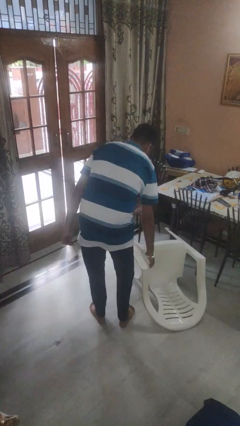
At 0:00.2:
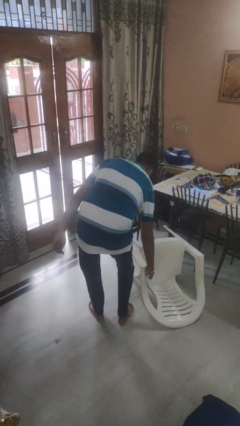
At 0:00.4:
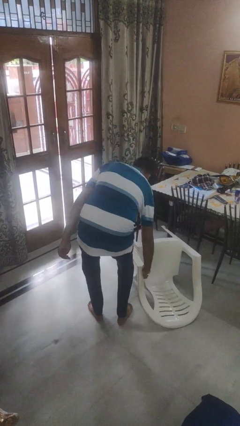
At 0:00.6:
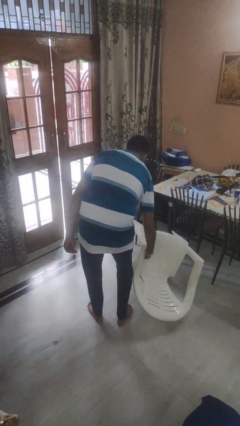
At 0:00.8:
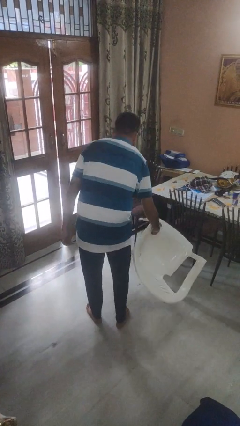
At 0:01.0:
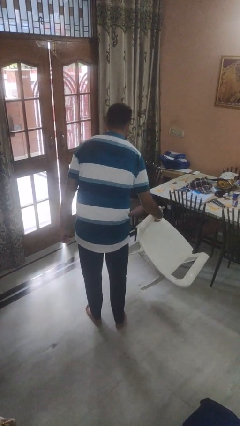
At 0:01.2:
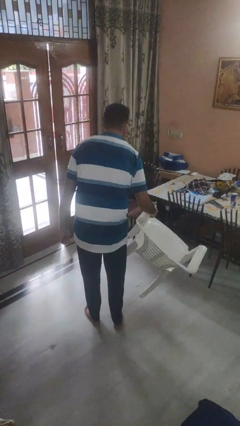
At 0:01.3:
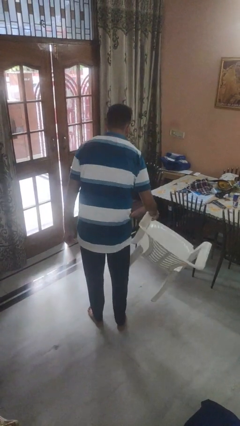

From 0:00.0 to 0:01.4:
person sets upright furniture

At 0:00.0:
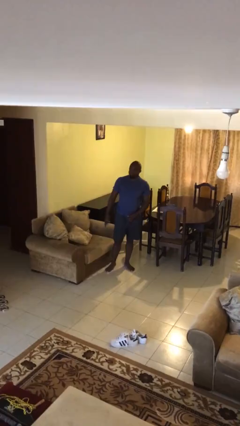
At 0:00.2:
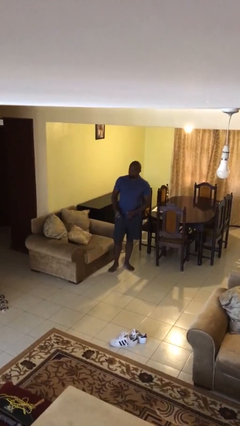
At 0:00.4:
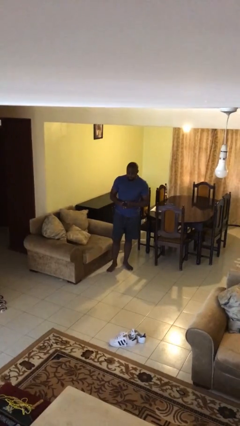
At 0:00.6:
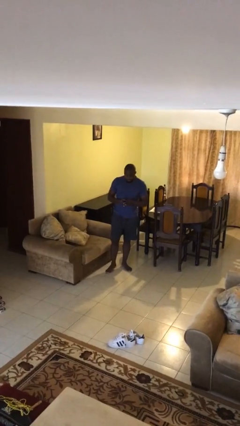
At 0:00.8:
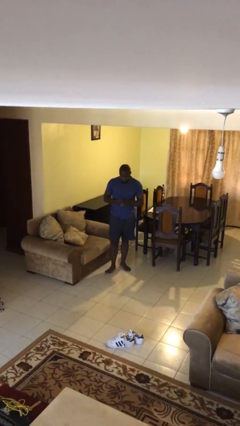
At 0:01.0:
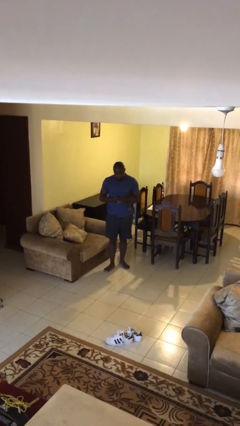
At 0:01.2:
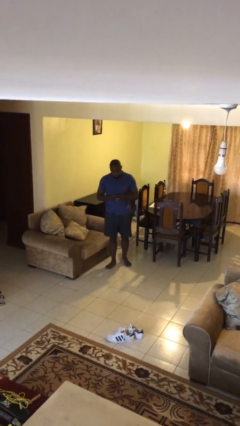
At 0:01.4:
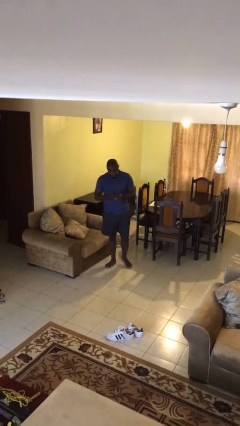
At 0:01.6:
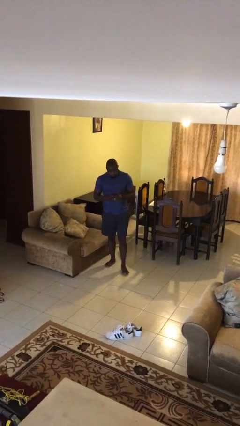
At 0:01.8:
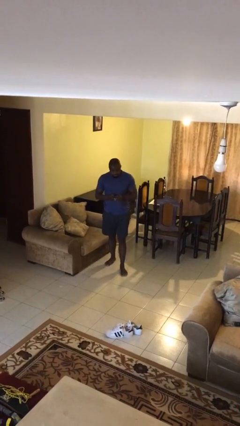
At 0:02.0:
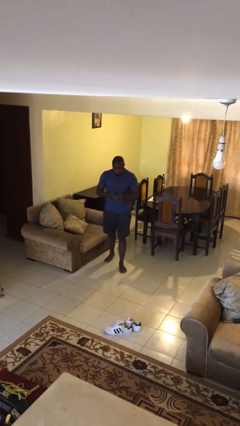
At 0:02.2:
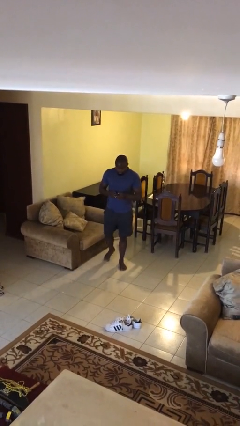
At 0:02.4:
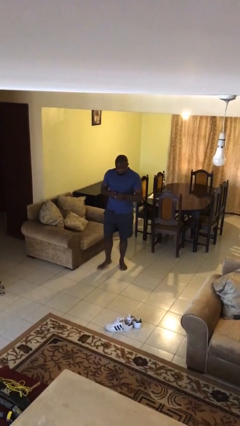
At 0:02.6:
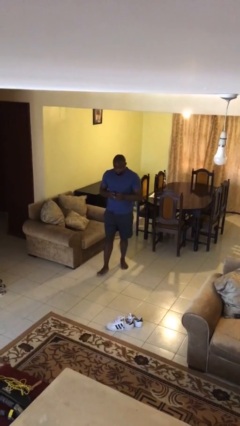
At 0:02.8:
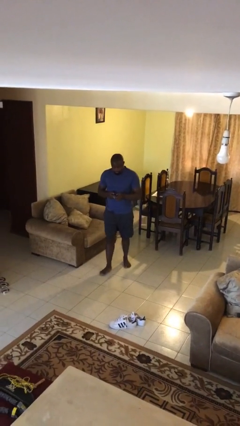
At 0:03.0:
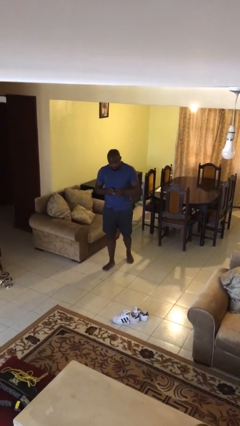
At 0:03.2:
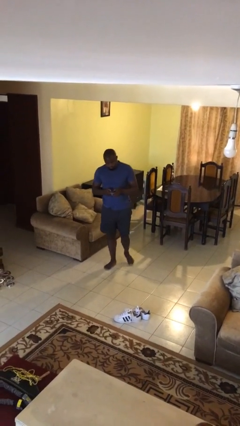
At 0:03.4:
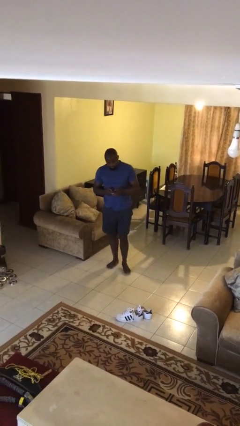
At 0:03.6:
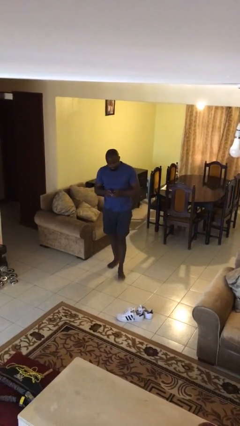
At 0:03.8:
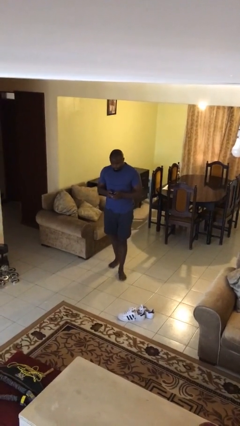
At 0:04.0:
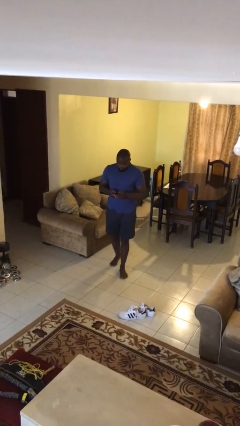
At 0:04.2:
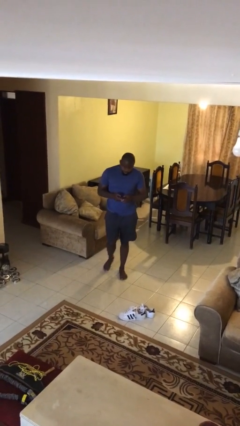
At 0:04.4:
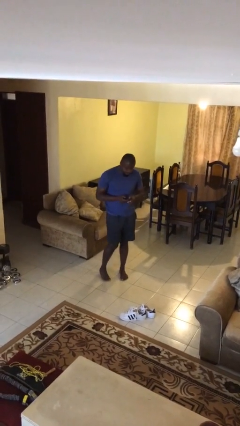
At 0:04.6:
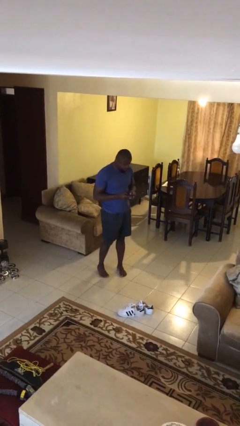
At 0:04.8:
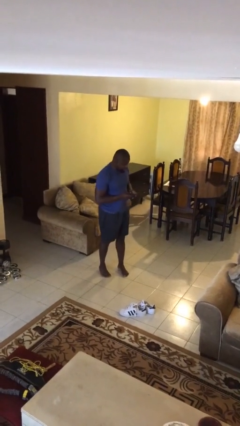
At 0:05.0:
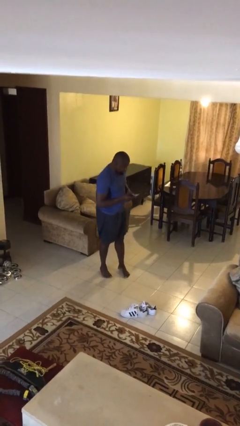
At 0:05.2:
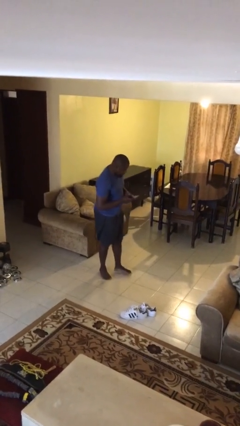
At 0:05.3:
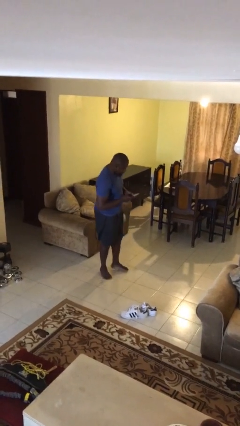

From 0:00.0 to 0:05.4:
person texts on phone

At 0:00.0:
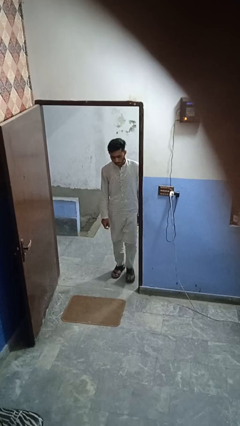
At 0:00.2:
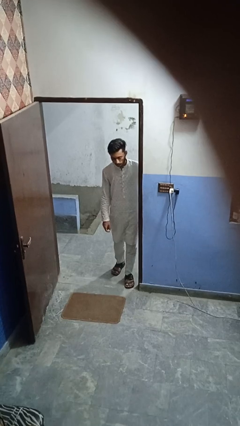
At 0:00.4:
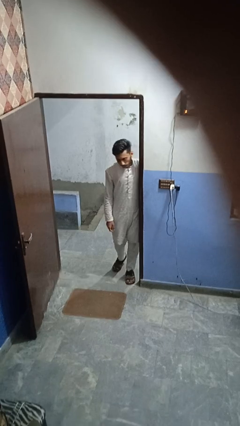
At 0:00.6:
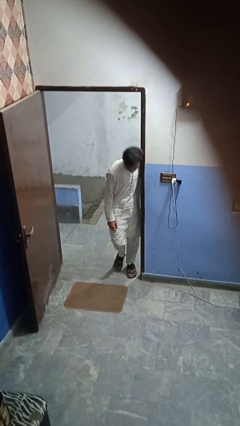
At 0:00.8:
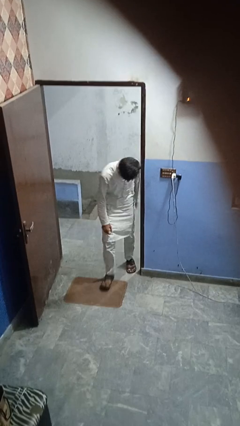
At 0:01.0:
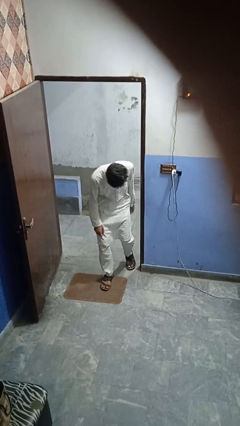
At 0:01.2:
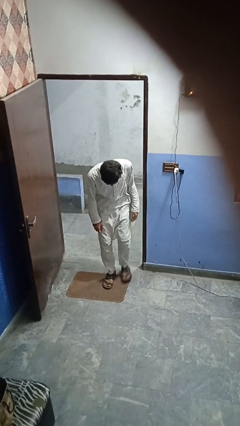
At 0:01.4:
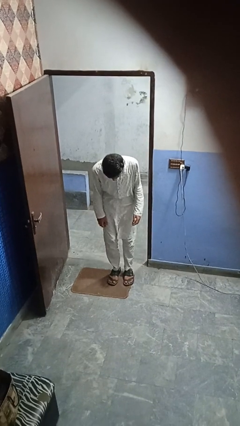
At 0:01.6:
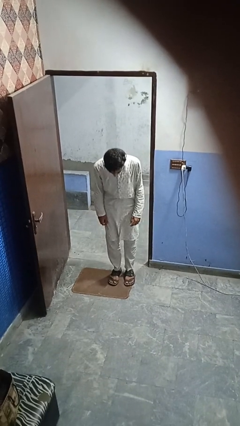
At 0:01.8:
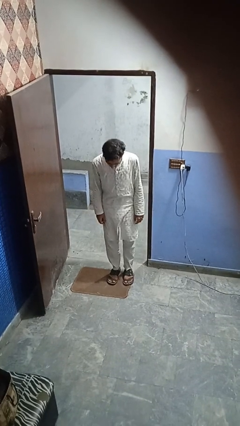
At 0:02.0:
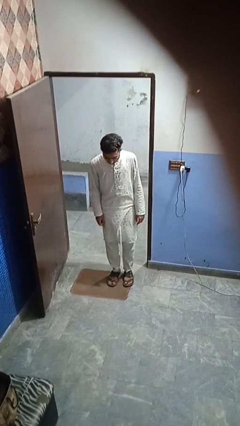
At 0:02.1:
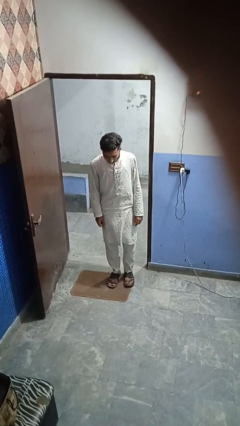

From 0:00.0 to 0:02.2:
person bumps into wall

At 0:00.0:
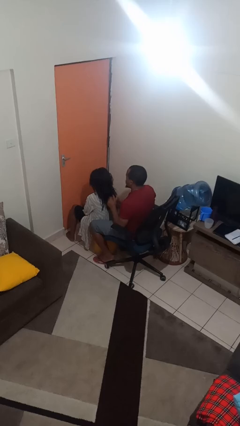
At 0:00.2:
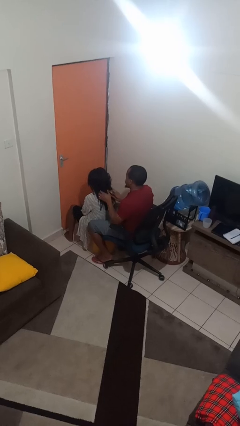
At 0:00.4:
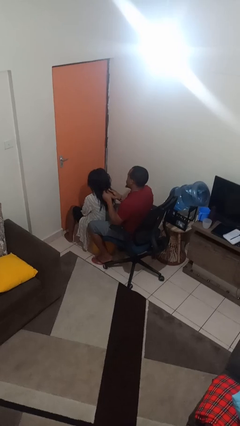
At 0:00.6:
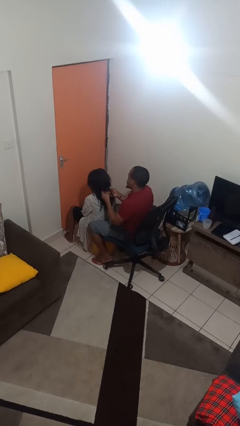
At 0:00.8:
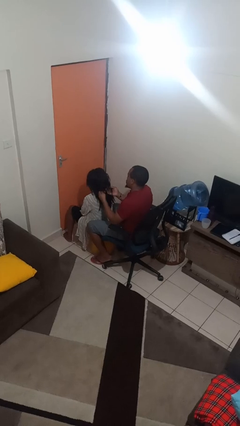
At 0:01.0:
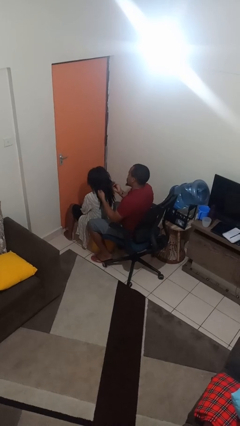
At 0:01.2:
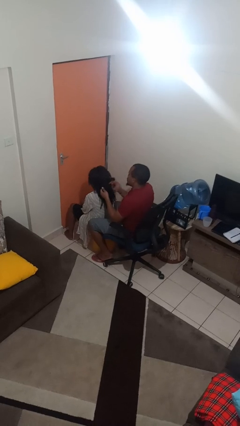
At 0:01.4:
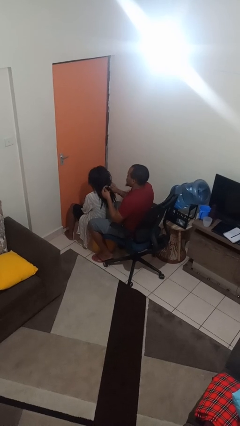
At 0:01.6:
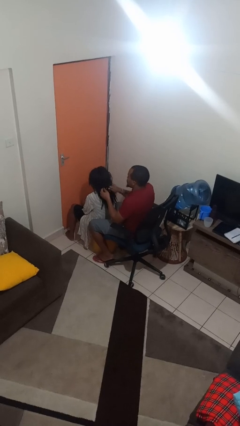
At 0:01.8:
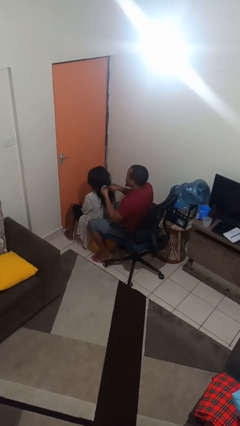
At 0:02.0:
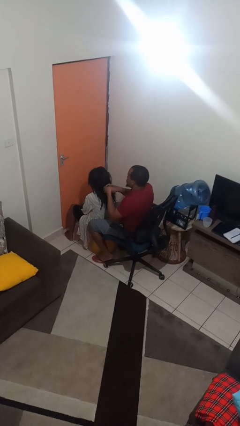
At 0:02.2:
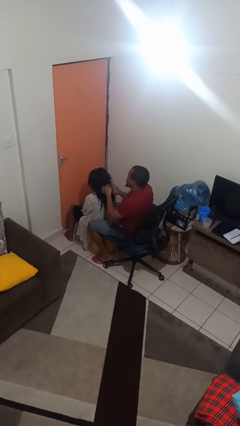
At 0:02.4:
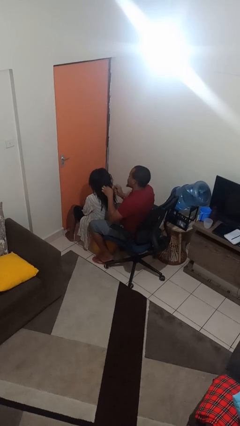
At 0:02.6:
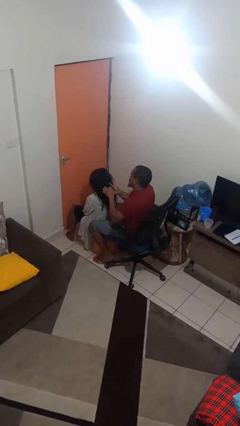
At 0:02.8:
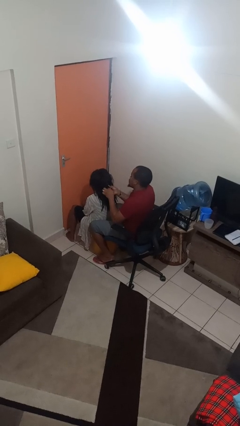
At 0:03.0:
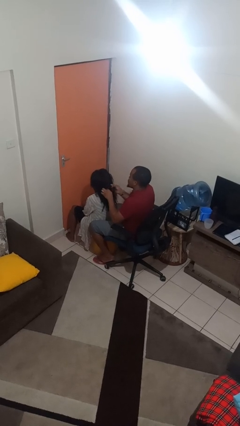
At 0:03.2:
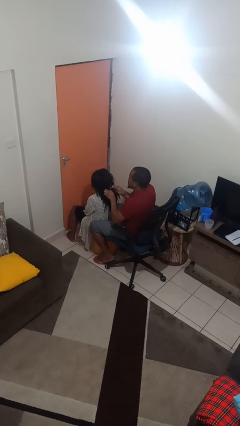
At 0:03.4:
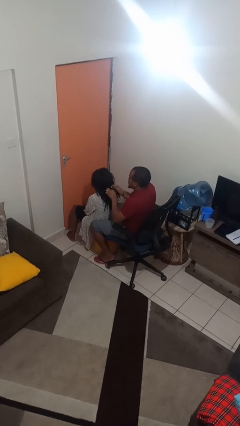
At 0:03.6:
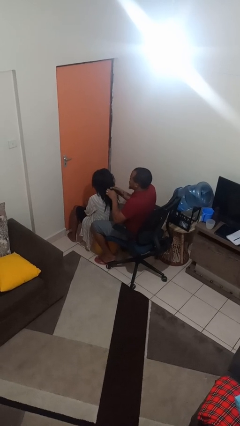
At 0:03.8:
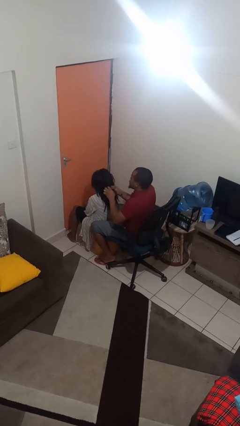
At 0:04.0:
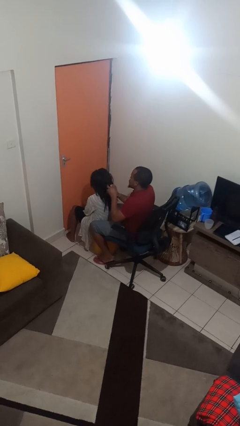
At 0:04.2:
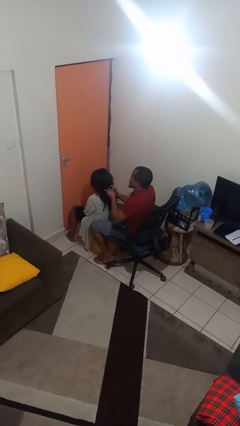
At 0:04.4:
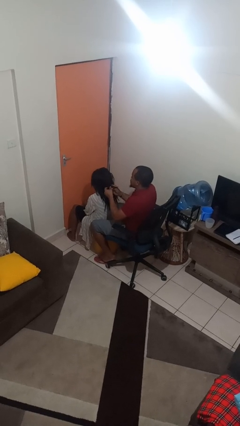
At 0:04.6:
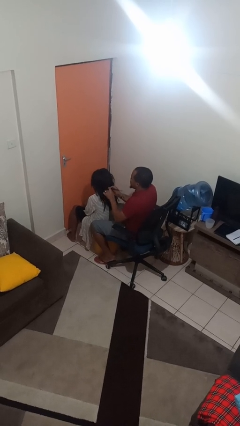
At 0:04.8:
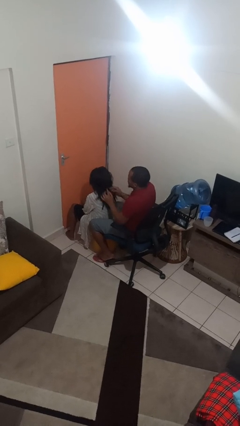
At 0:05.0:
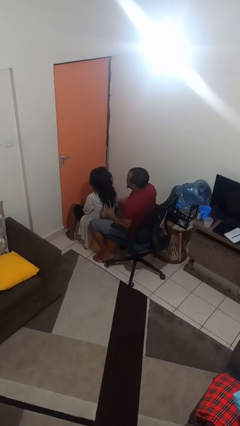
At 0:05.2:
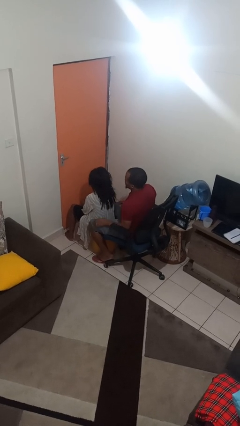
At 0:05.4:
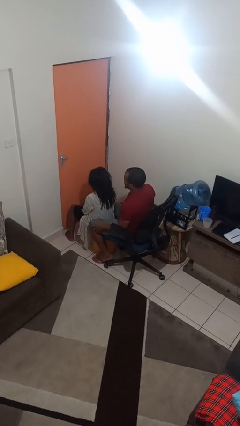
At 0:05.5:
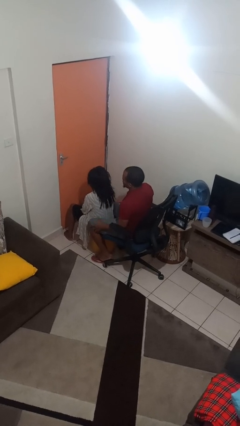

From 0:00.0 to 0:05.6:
person braids hair of person

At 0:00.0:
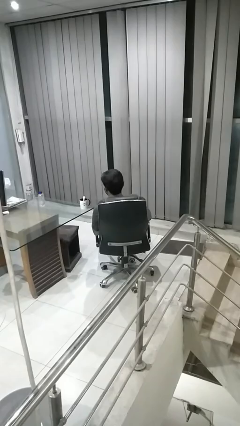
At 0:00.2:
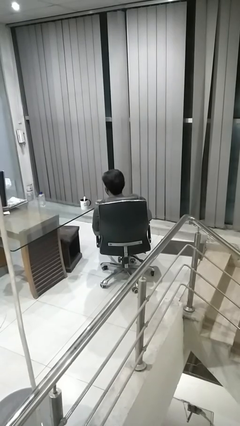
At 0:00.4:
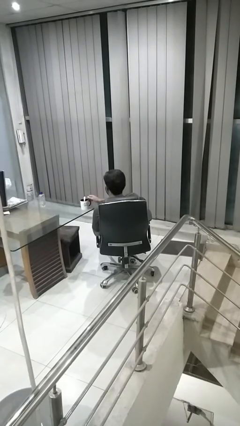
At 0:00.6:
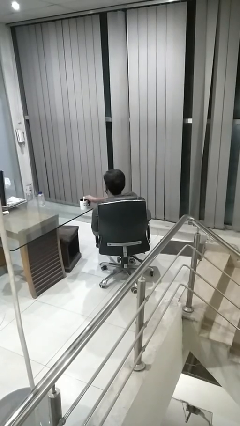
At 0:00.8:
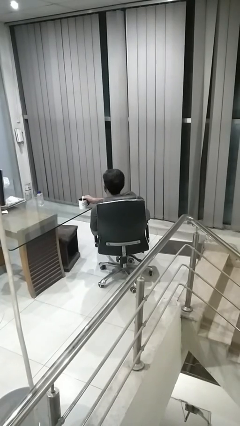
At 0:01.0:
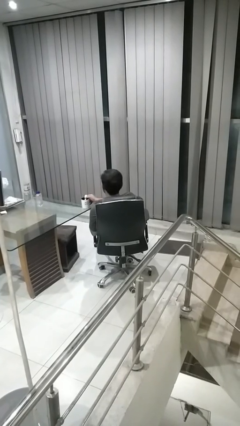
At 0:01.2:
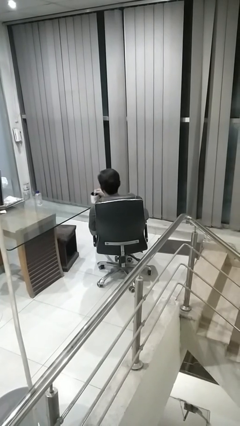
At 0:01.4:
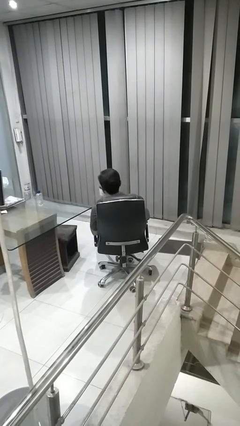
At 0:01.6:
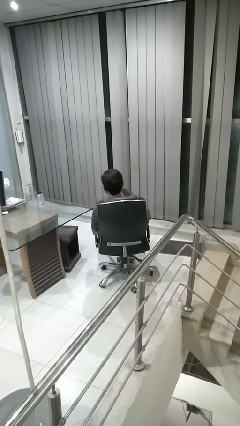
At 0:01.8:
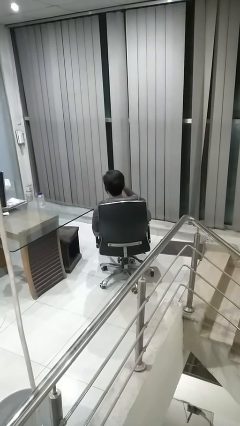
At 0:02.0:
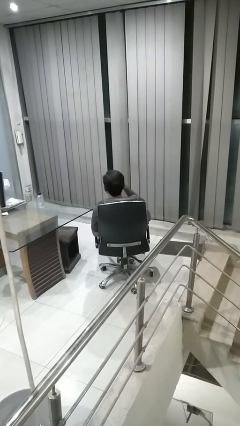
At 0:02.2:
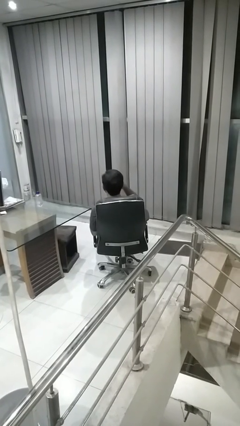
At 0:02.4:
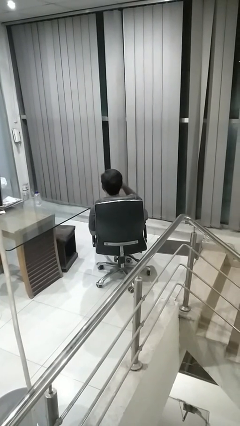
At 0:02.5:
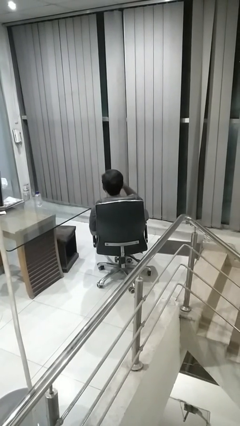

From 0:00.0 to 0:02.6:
person drinks from mug
